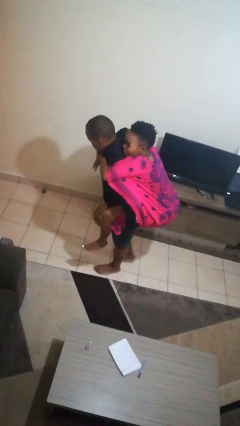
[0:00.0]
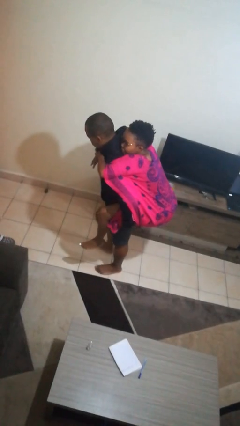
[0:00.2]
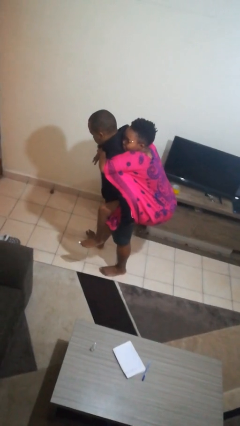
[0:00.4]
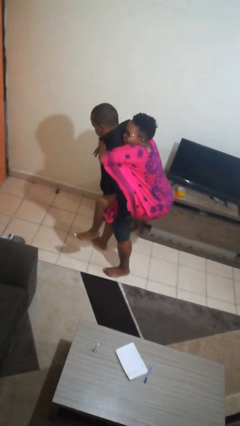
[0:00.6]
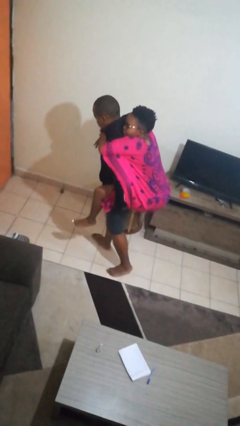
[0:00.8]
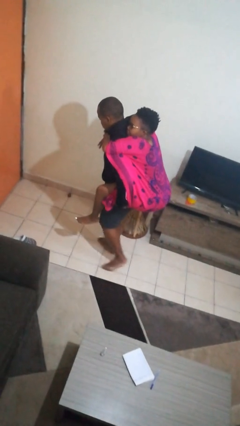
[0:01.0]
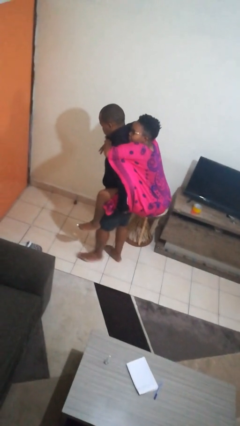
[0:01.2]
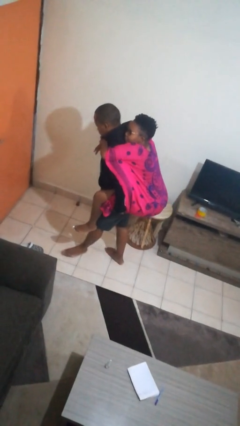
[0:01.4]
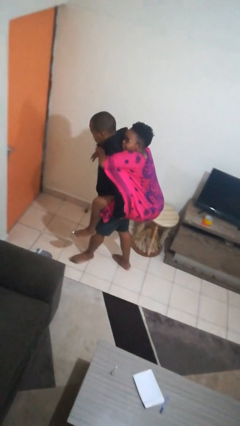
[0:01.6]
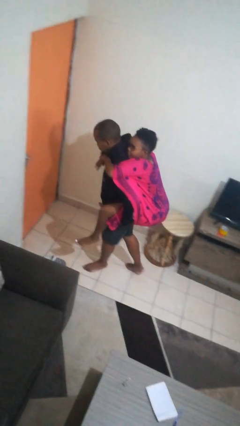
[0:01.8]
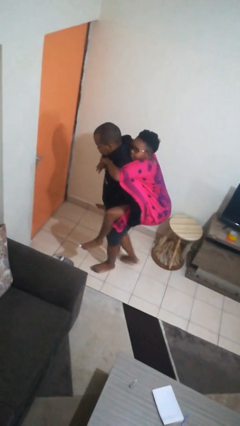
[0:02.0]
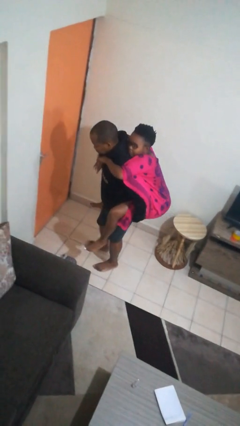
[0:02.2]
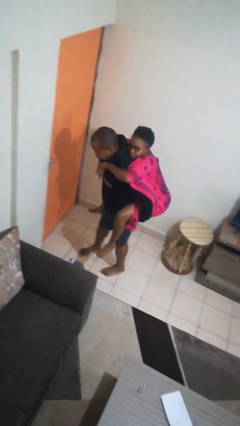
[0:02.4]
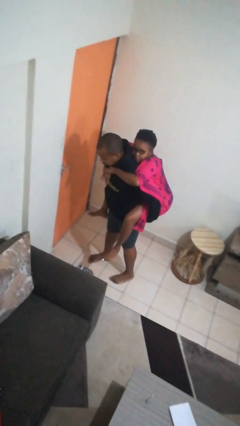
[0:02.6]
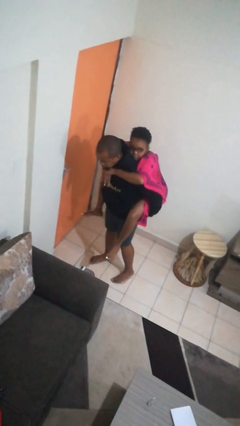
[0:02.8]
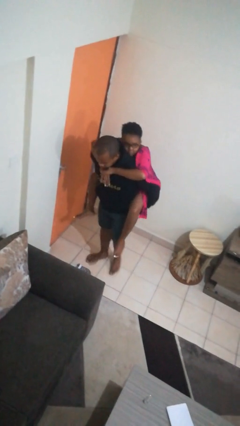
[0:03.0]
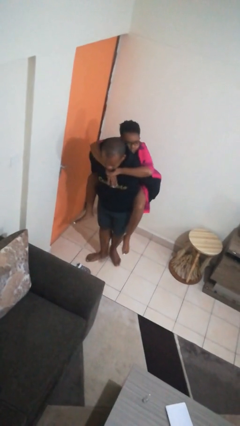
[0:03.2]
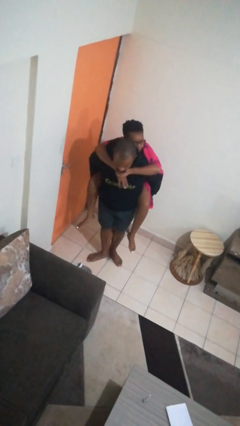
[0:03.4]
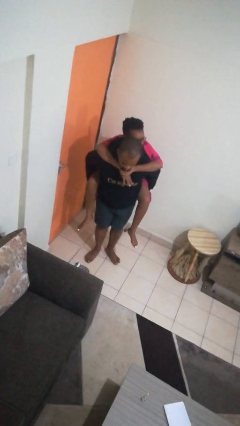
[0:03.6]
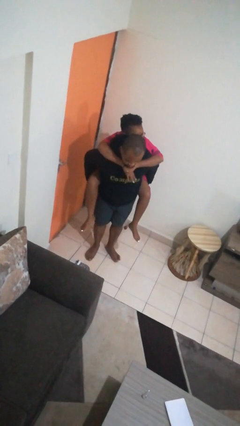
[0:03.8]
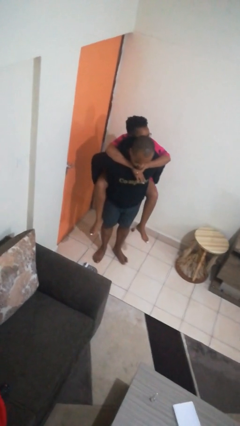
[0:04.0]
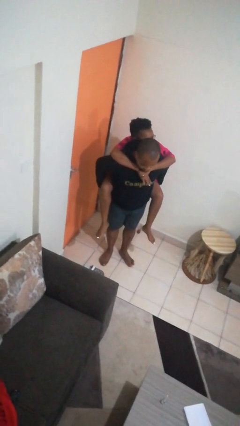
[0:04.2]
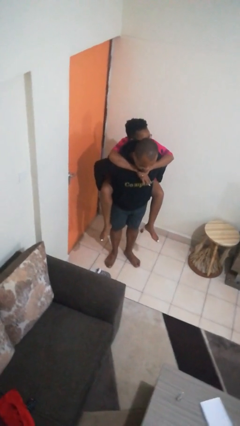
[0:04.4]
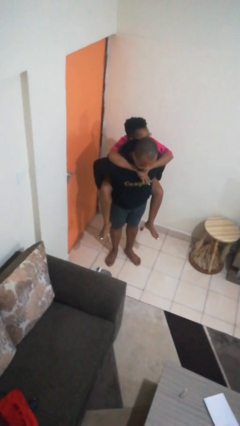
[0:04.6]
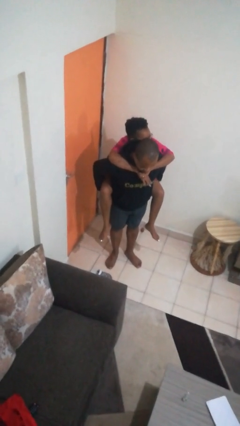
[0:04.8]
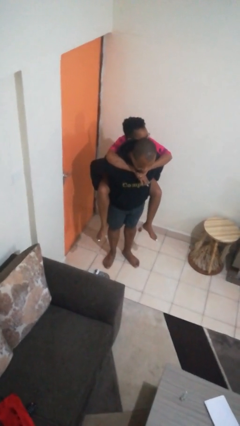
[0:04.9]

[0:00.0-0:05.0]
person carries person on back

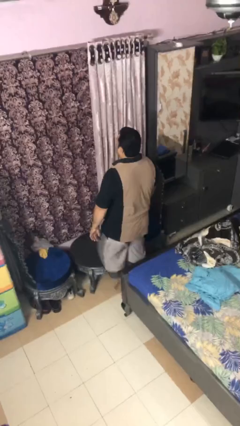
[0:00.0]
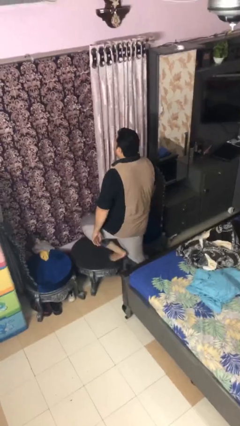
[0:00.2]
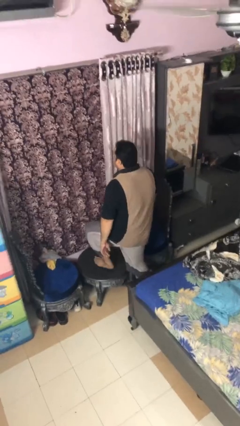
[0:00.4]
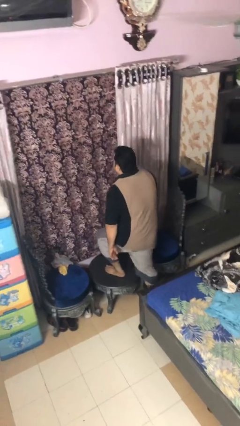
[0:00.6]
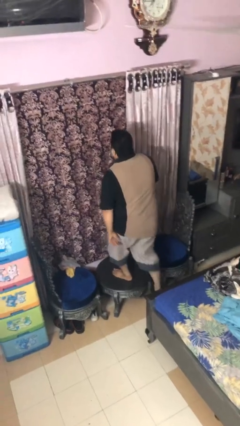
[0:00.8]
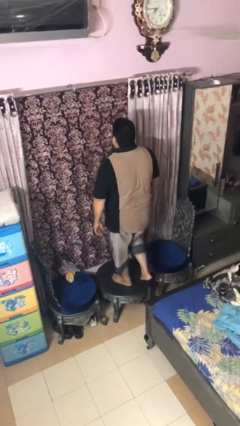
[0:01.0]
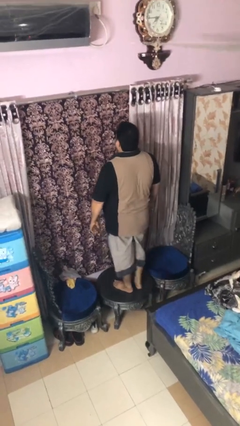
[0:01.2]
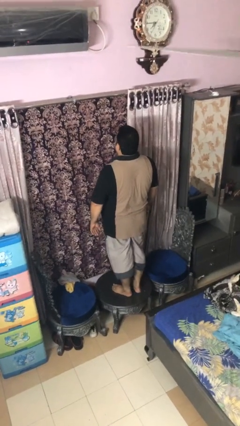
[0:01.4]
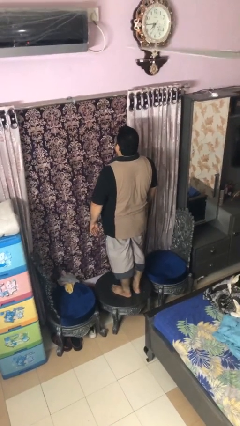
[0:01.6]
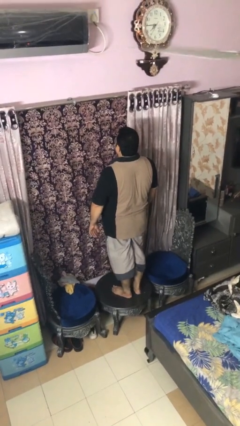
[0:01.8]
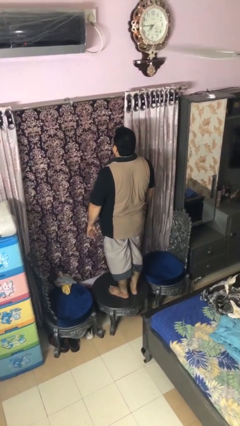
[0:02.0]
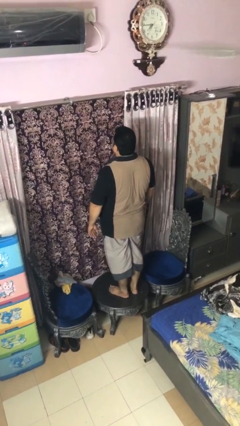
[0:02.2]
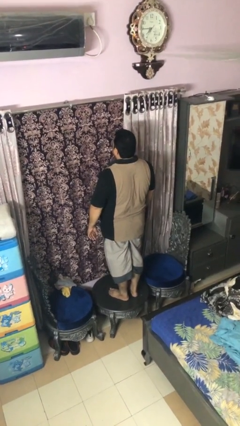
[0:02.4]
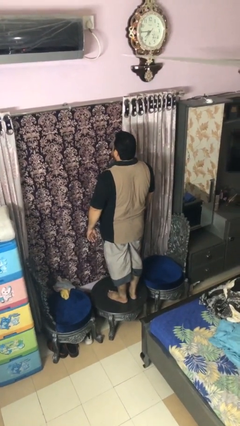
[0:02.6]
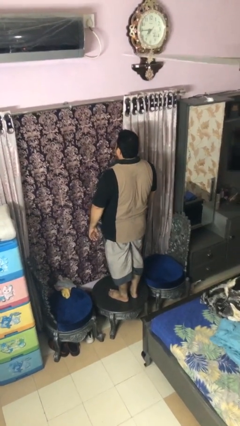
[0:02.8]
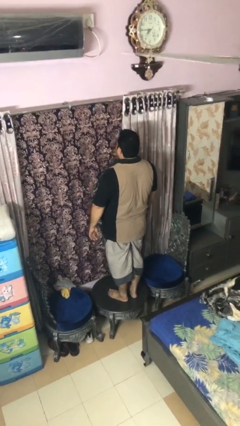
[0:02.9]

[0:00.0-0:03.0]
person climbs on table

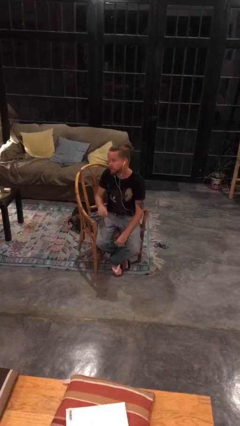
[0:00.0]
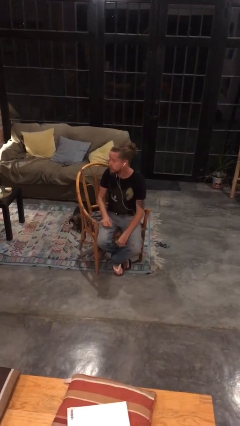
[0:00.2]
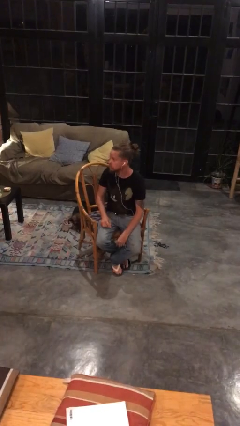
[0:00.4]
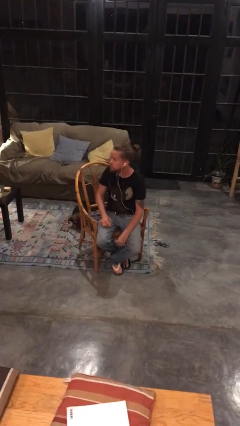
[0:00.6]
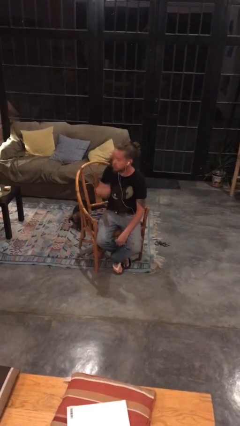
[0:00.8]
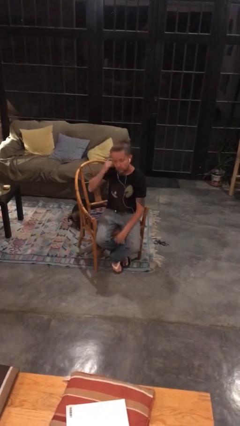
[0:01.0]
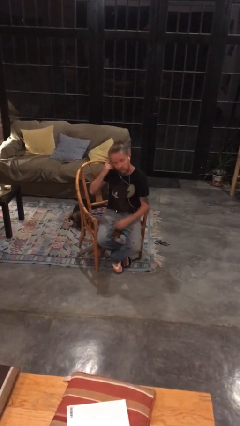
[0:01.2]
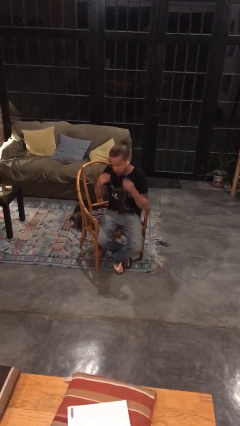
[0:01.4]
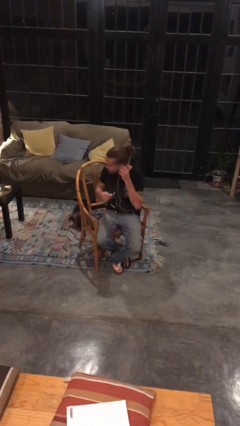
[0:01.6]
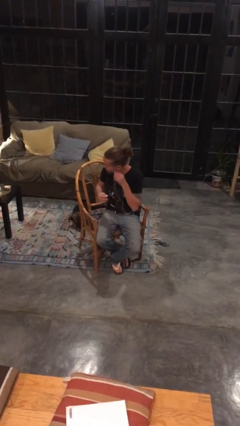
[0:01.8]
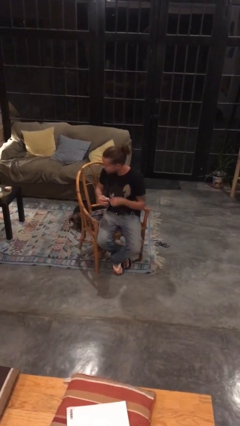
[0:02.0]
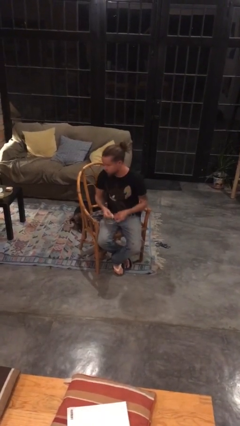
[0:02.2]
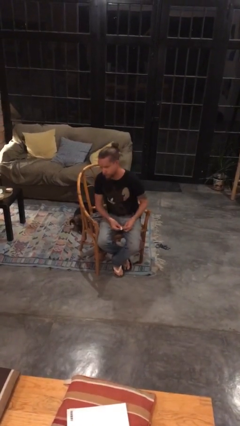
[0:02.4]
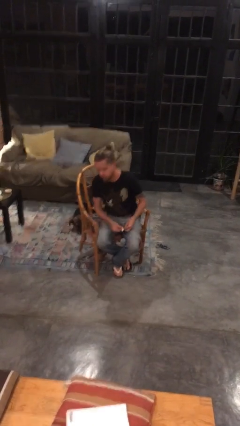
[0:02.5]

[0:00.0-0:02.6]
person takes off headphones

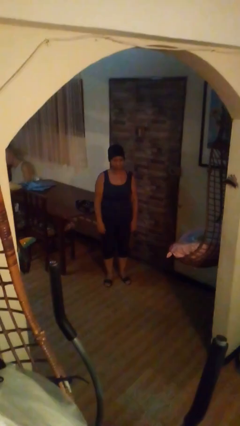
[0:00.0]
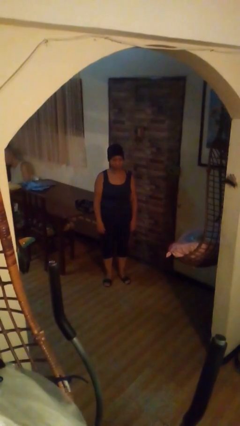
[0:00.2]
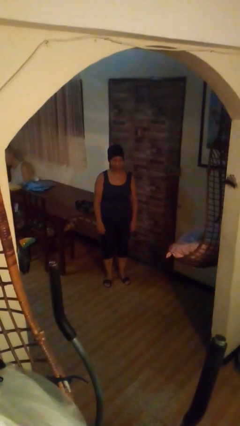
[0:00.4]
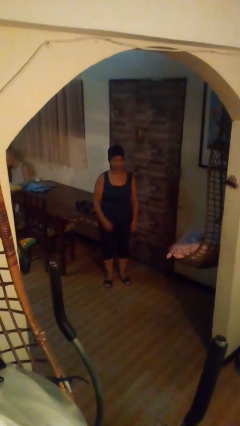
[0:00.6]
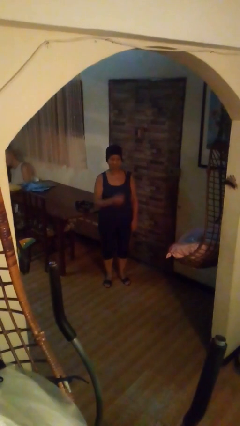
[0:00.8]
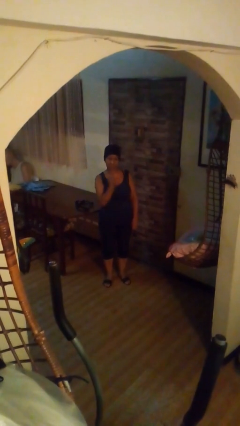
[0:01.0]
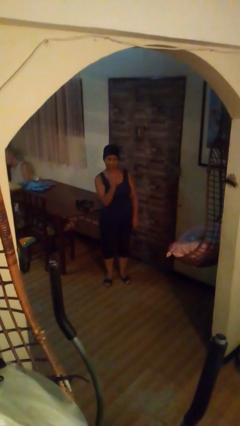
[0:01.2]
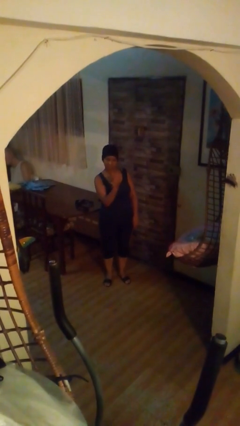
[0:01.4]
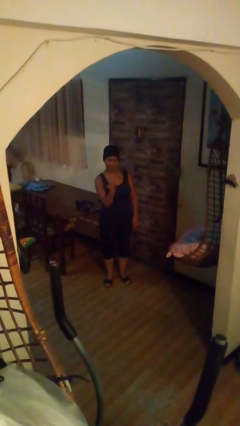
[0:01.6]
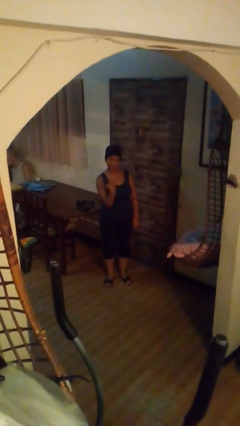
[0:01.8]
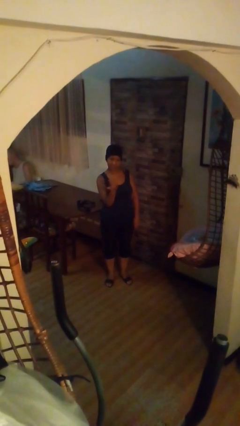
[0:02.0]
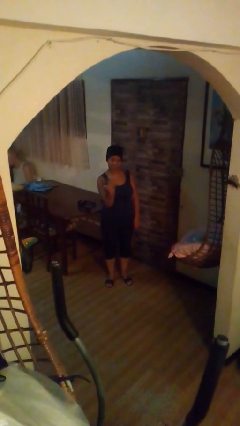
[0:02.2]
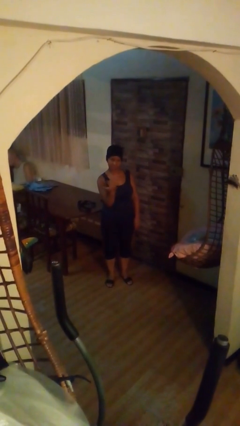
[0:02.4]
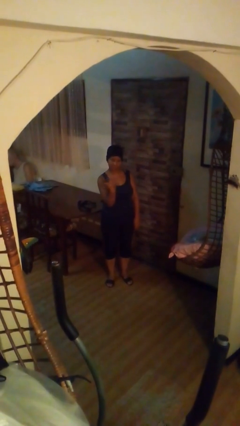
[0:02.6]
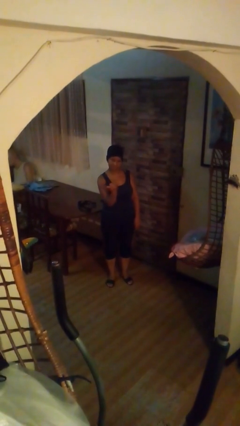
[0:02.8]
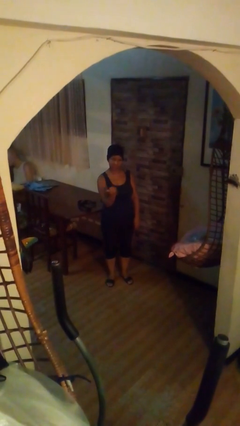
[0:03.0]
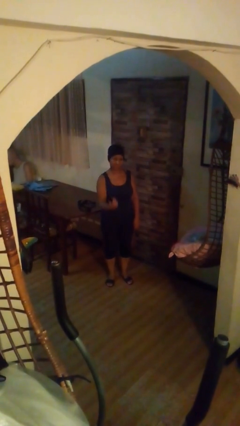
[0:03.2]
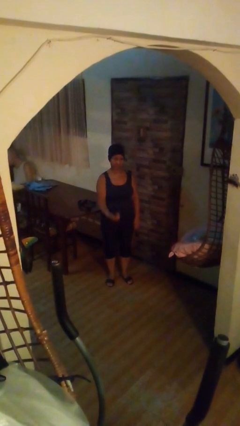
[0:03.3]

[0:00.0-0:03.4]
person gestures come here

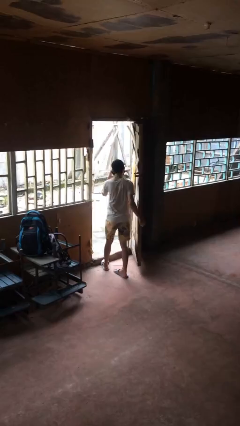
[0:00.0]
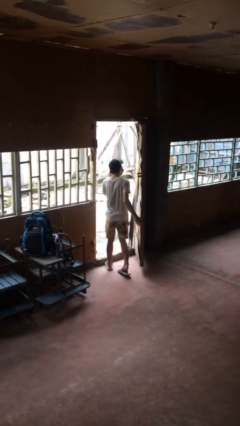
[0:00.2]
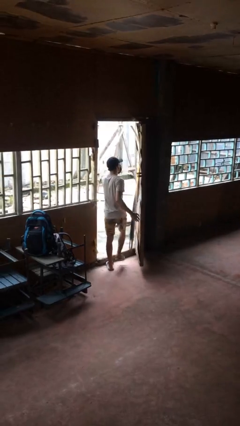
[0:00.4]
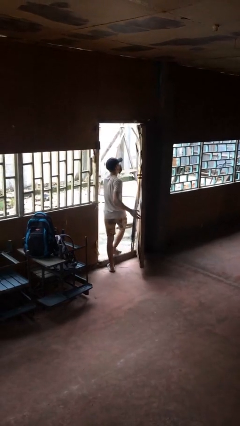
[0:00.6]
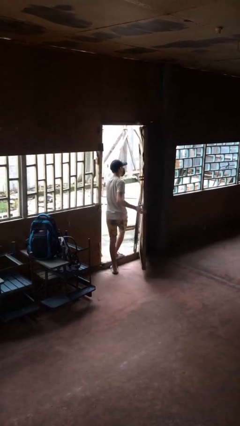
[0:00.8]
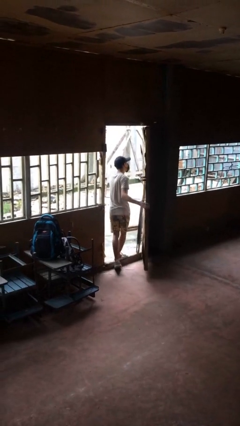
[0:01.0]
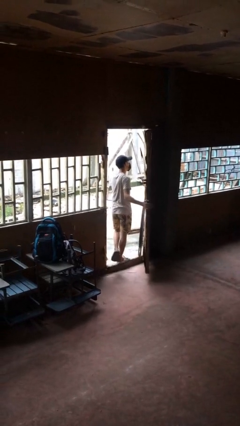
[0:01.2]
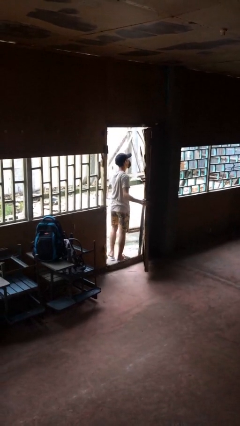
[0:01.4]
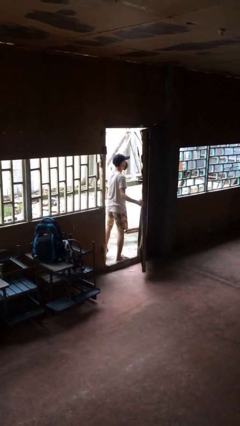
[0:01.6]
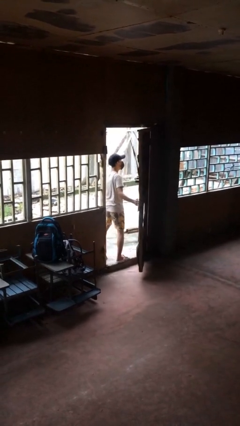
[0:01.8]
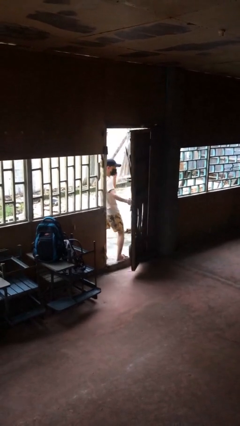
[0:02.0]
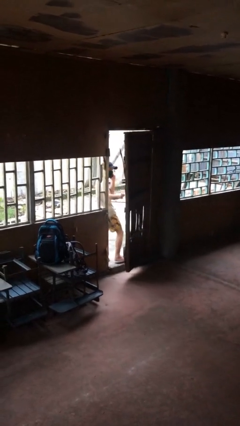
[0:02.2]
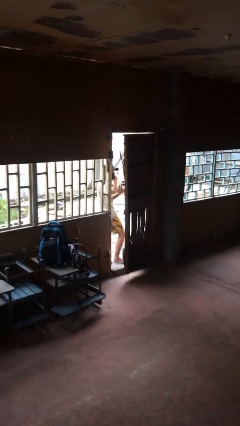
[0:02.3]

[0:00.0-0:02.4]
person exits scene through structure
